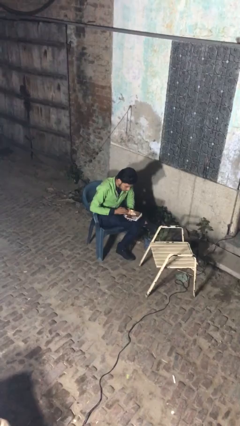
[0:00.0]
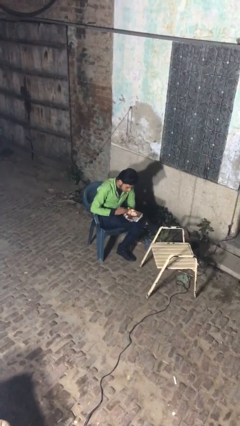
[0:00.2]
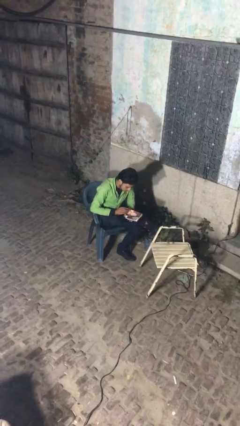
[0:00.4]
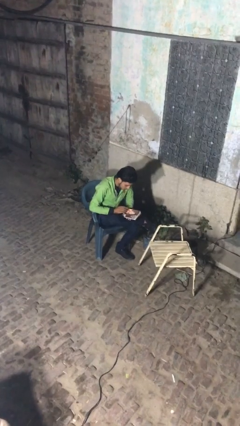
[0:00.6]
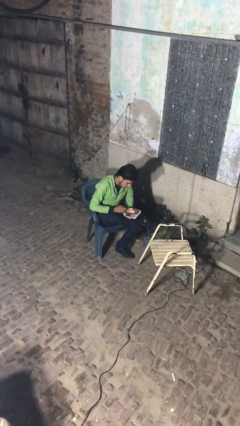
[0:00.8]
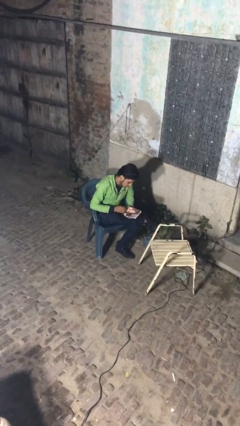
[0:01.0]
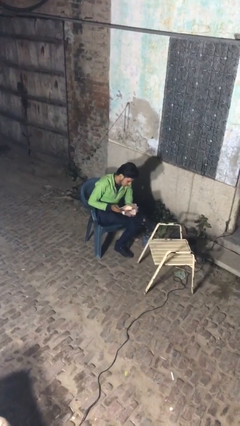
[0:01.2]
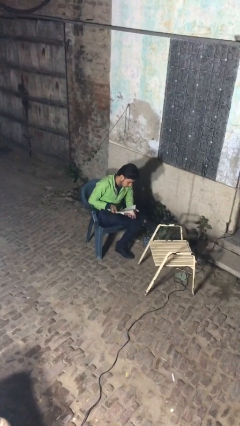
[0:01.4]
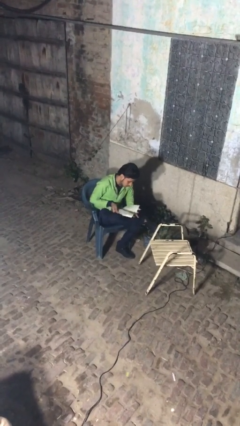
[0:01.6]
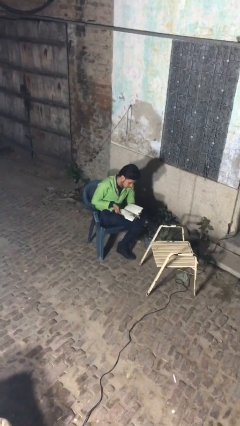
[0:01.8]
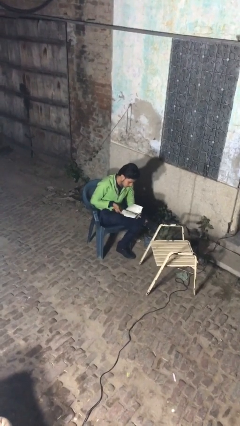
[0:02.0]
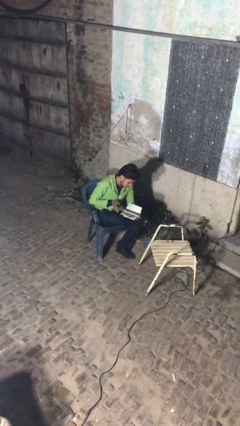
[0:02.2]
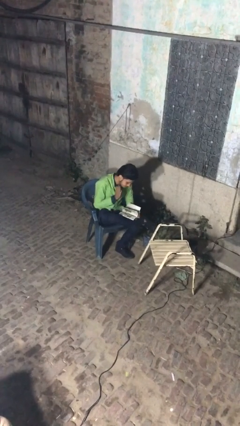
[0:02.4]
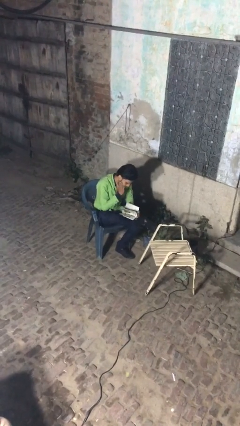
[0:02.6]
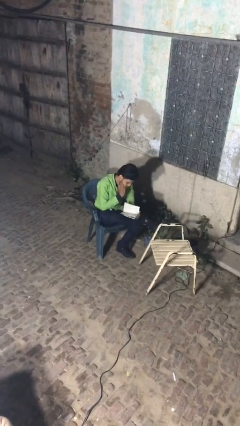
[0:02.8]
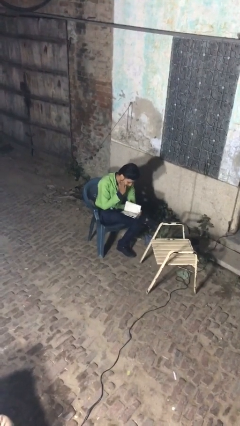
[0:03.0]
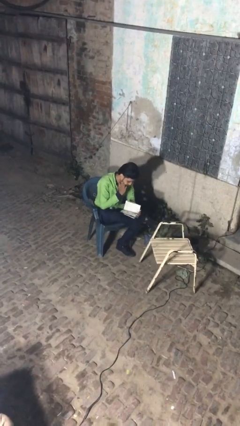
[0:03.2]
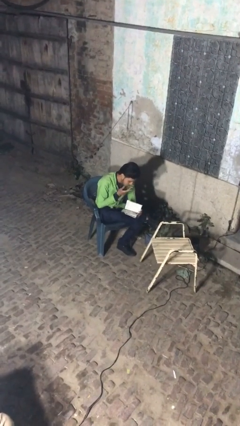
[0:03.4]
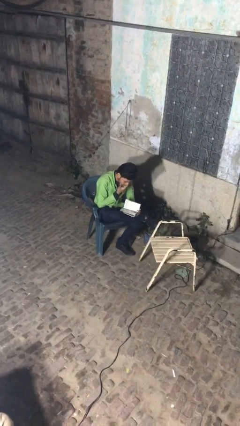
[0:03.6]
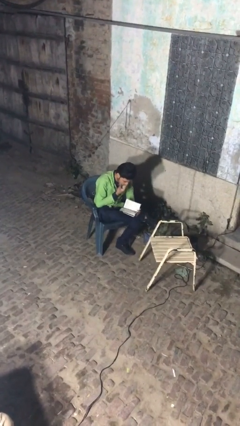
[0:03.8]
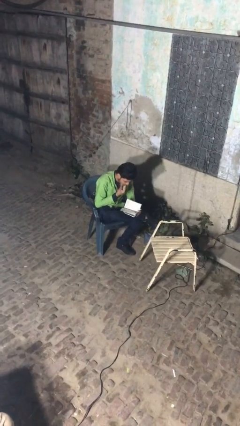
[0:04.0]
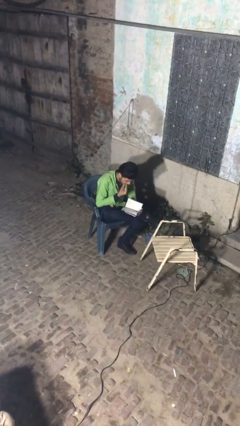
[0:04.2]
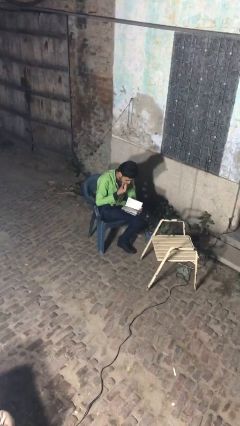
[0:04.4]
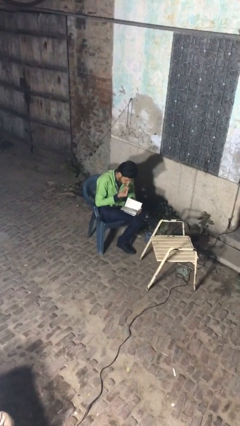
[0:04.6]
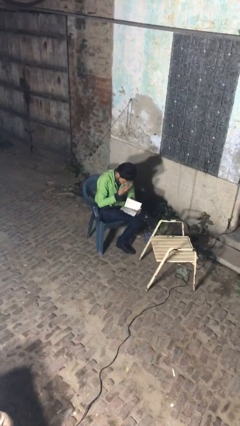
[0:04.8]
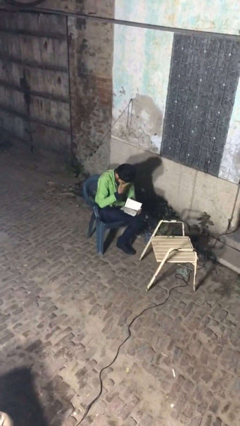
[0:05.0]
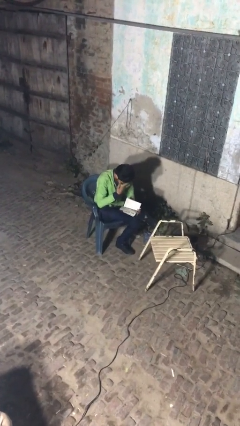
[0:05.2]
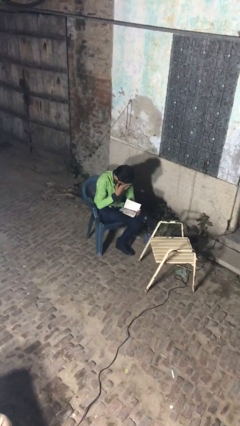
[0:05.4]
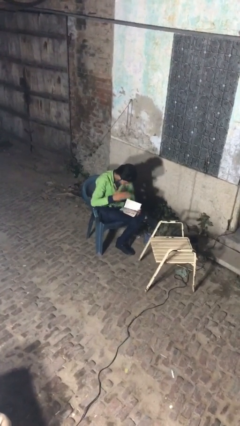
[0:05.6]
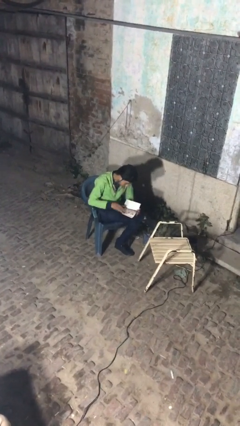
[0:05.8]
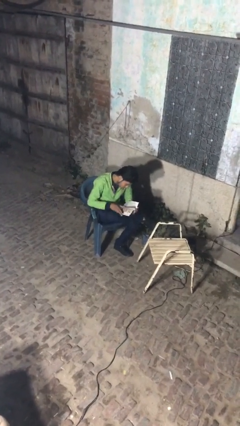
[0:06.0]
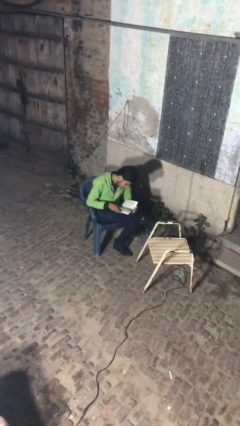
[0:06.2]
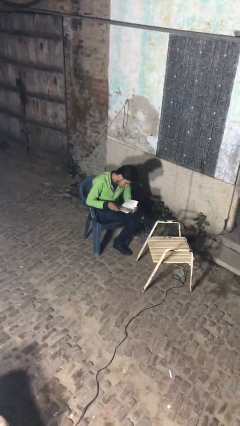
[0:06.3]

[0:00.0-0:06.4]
person reads document

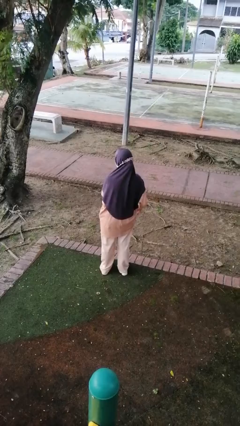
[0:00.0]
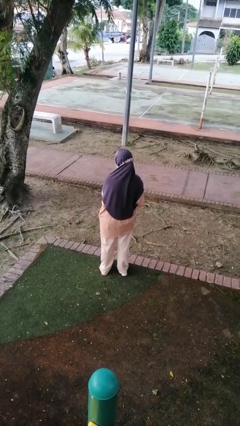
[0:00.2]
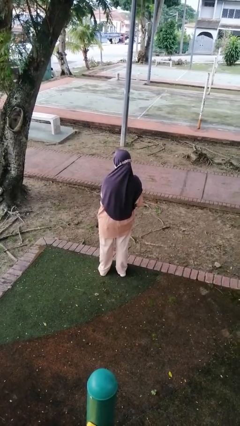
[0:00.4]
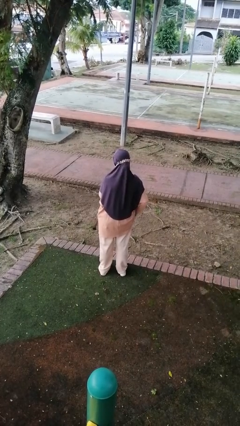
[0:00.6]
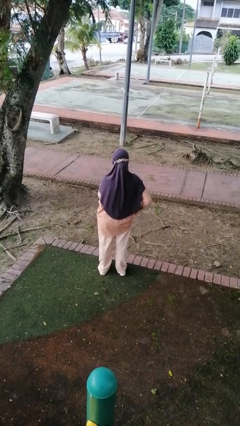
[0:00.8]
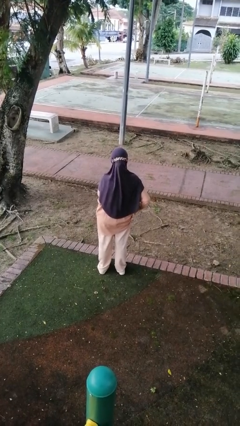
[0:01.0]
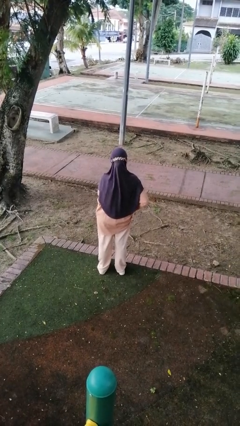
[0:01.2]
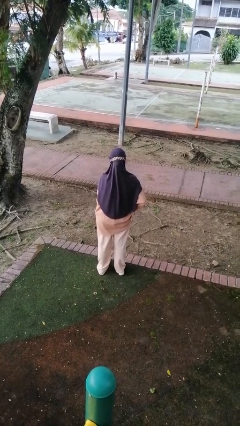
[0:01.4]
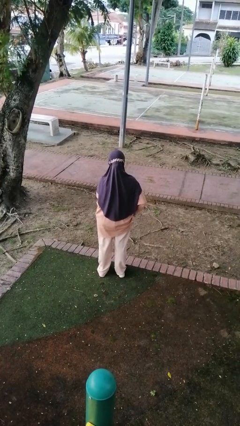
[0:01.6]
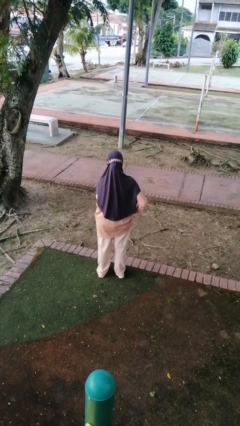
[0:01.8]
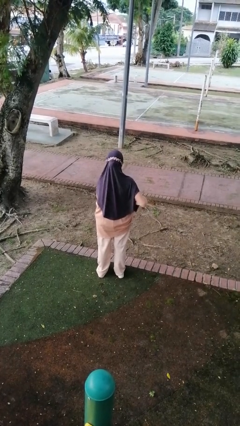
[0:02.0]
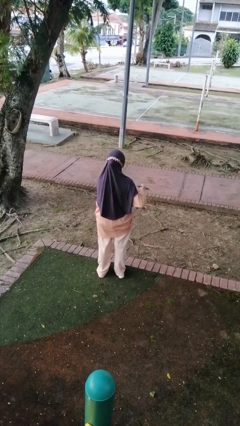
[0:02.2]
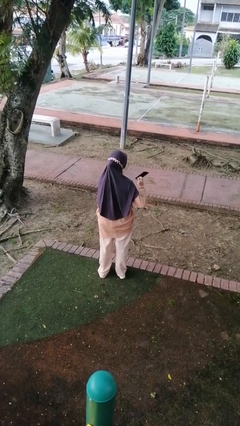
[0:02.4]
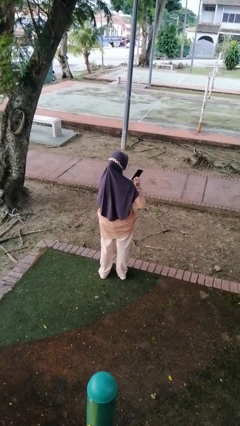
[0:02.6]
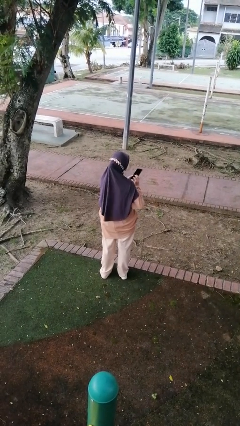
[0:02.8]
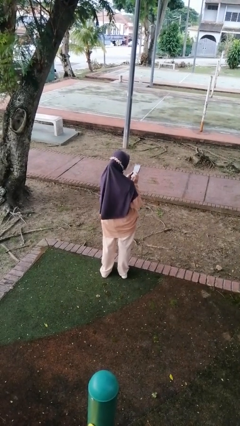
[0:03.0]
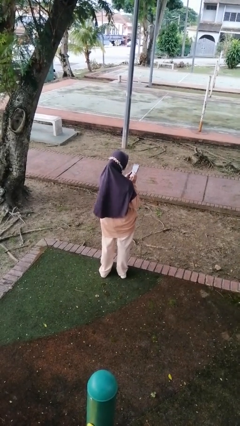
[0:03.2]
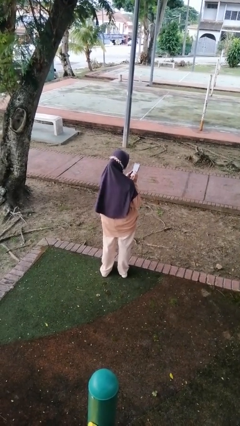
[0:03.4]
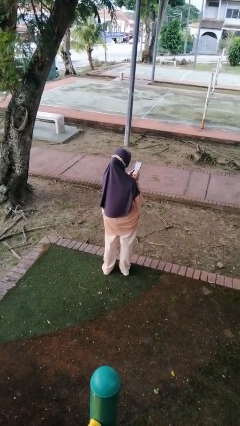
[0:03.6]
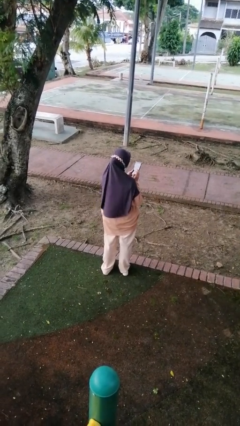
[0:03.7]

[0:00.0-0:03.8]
person takes phone from pocket

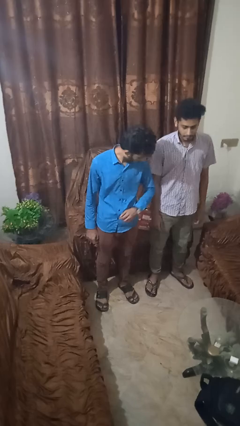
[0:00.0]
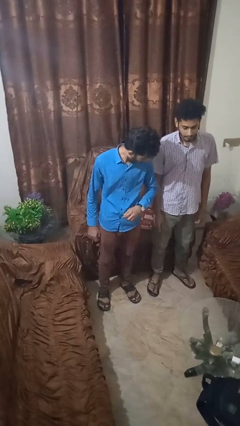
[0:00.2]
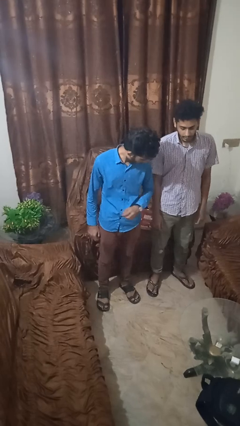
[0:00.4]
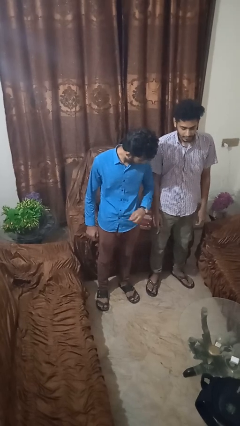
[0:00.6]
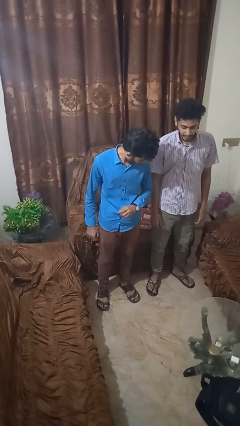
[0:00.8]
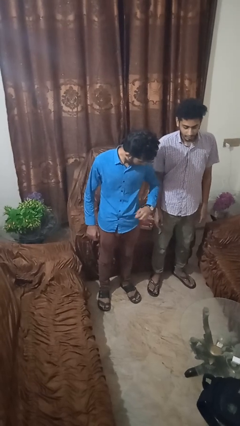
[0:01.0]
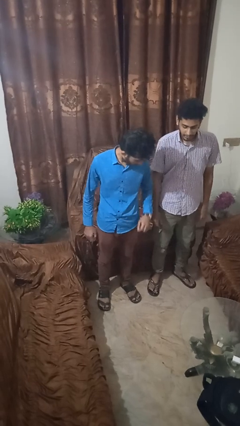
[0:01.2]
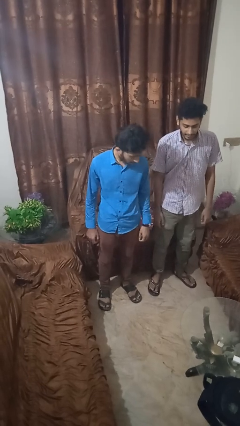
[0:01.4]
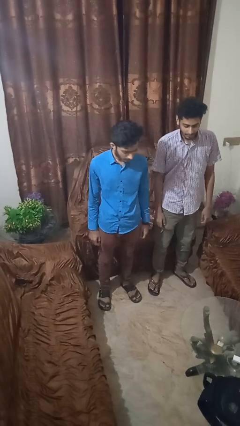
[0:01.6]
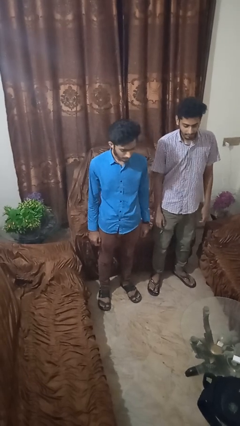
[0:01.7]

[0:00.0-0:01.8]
person nudges person with elbow

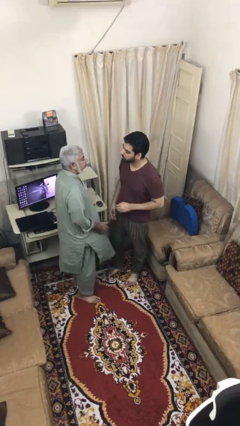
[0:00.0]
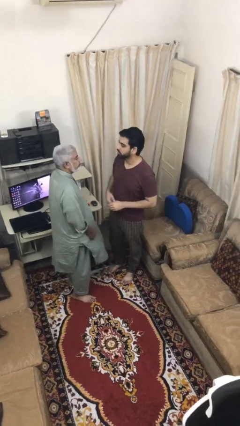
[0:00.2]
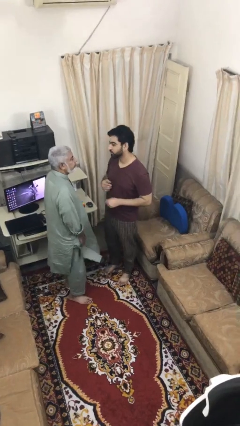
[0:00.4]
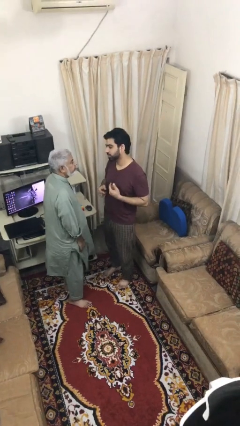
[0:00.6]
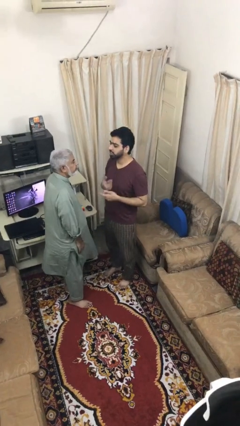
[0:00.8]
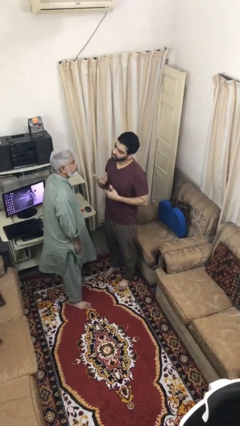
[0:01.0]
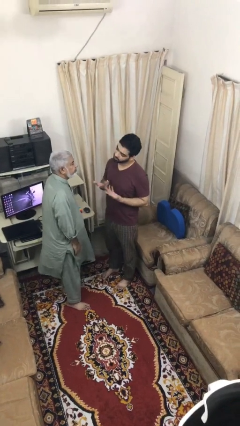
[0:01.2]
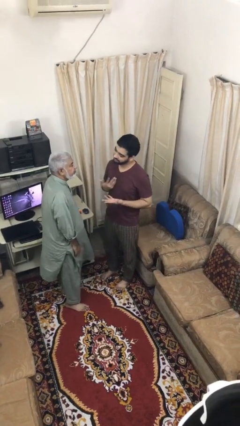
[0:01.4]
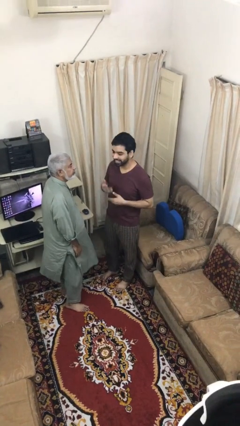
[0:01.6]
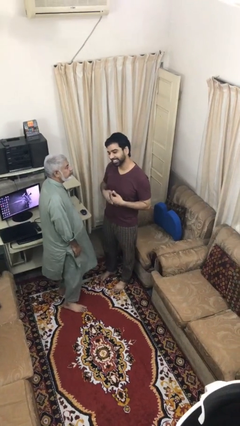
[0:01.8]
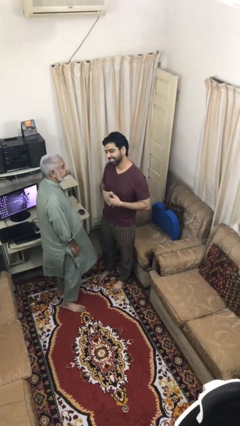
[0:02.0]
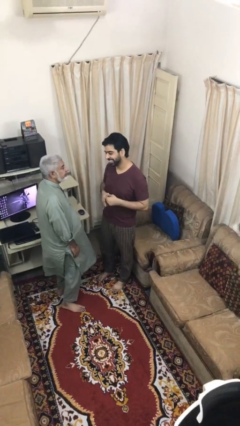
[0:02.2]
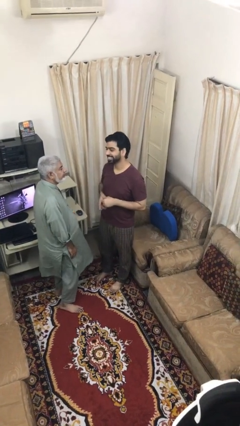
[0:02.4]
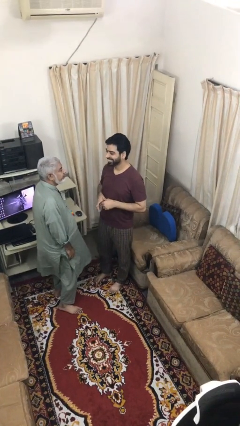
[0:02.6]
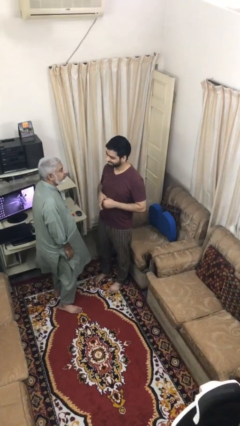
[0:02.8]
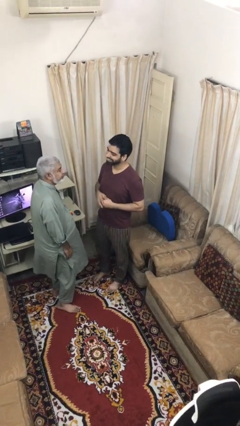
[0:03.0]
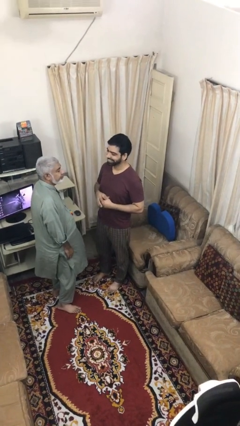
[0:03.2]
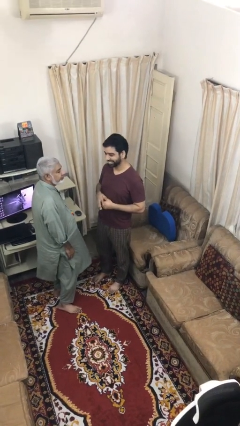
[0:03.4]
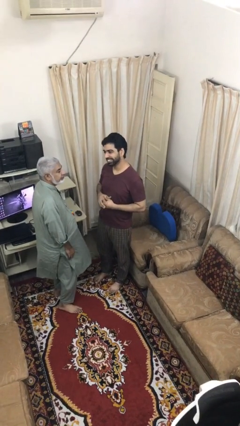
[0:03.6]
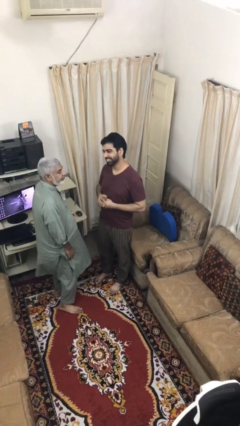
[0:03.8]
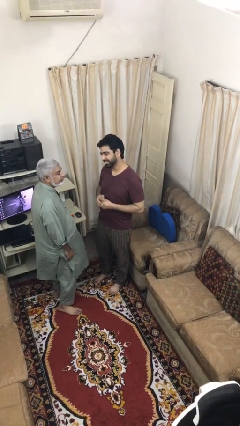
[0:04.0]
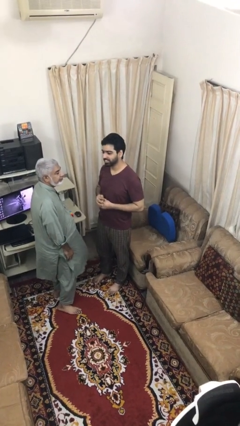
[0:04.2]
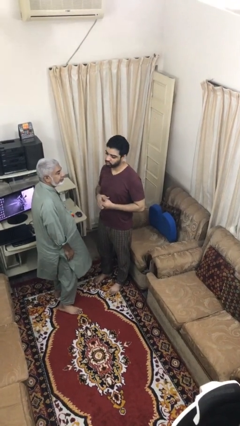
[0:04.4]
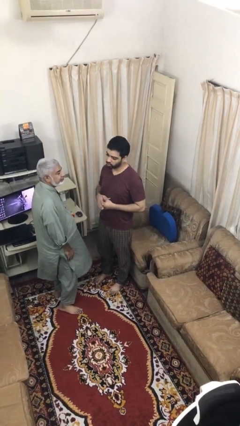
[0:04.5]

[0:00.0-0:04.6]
person talks to person

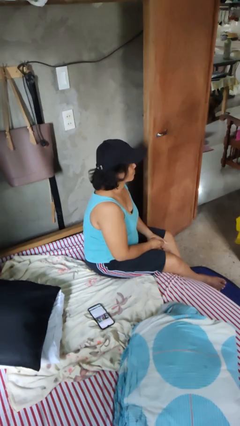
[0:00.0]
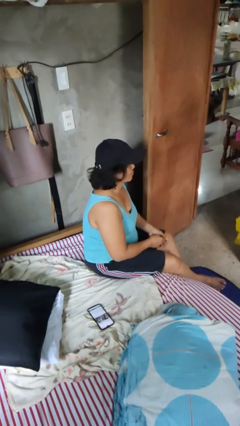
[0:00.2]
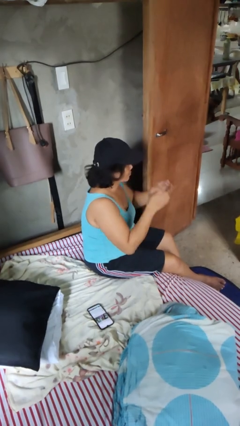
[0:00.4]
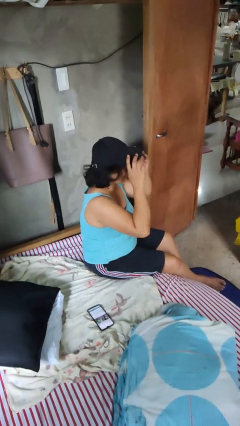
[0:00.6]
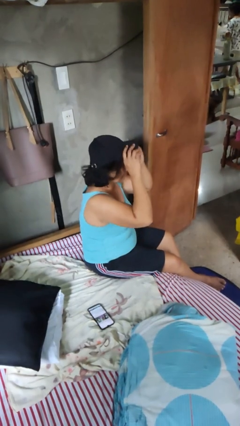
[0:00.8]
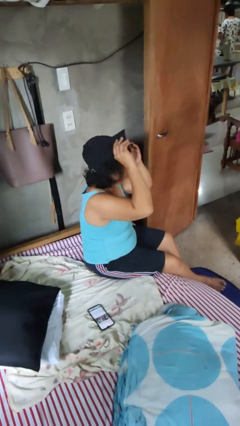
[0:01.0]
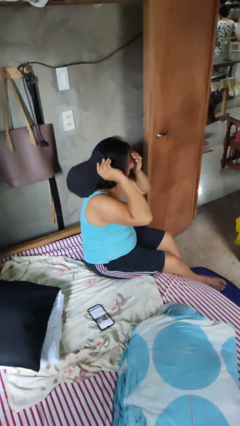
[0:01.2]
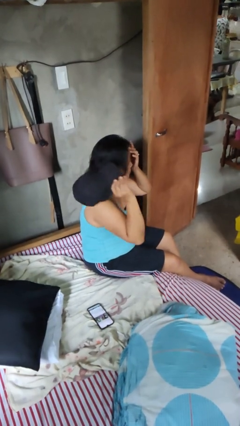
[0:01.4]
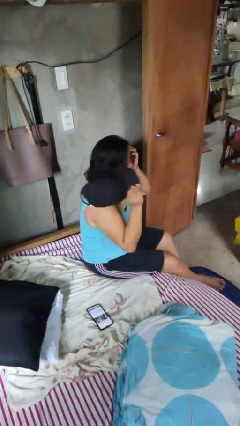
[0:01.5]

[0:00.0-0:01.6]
person takes off hat
